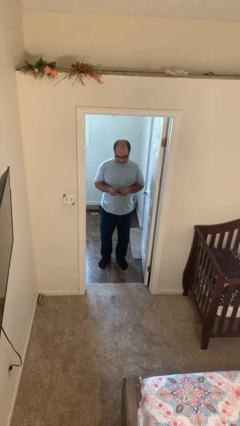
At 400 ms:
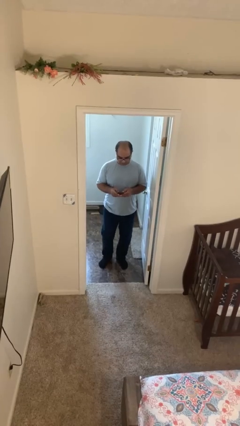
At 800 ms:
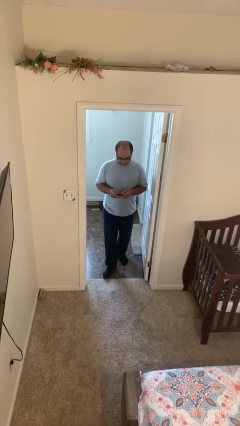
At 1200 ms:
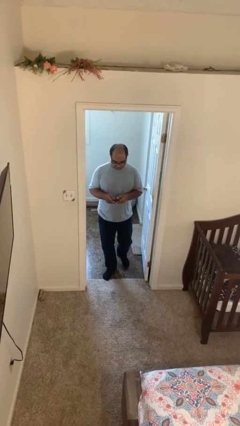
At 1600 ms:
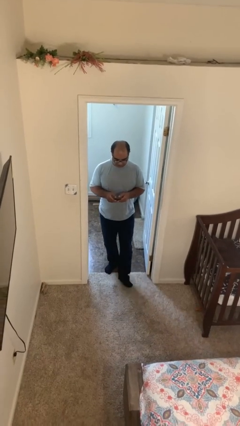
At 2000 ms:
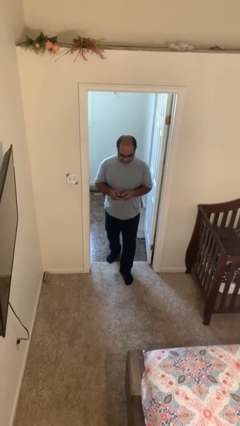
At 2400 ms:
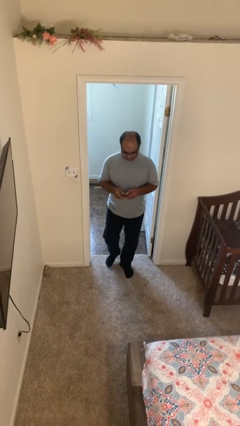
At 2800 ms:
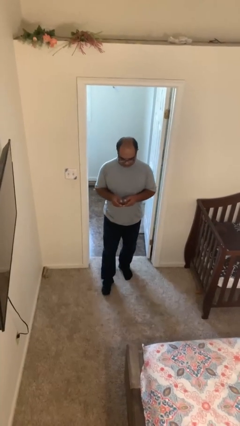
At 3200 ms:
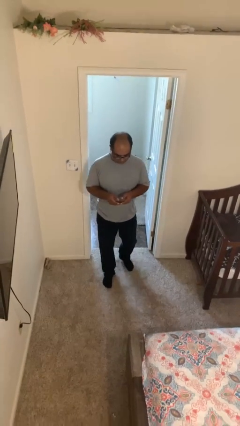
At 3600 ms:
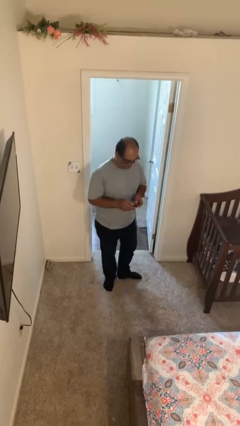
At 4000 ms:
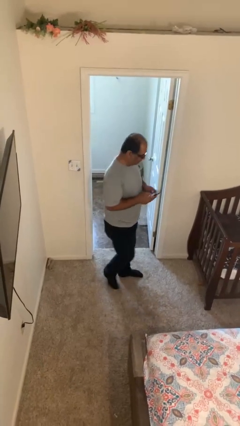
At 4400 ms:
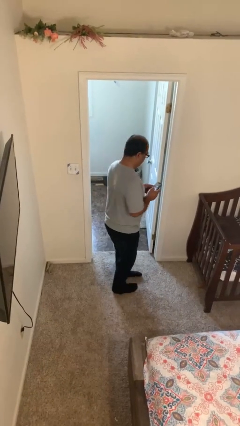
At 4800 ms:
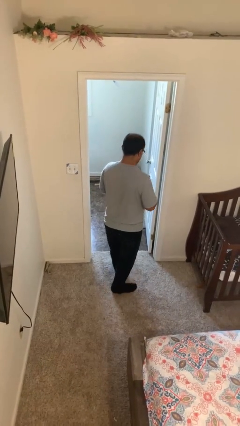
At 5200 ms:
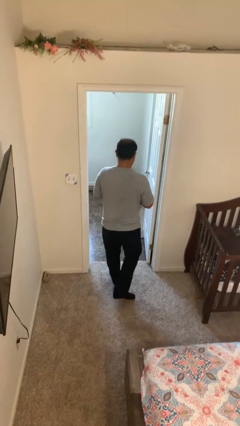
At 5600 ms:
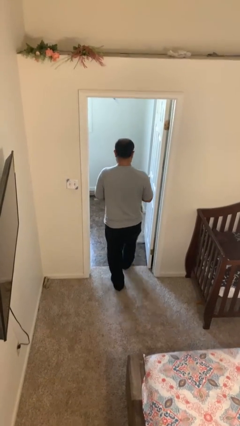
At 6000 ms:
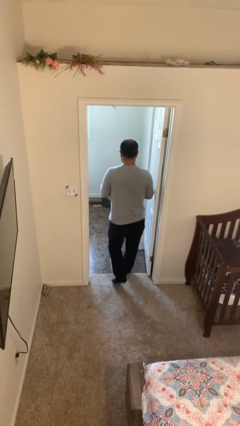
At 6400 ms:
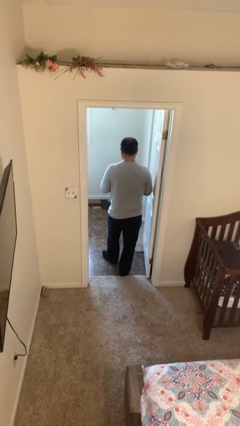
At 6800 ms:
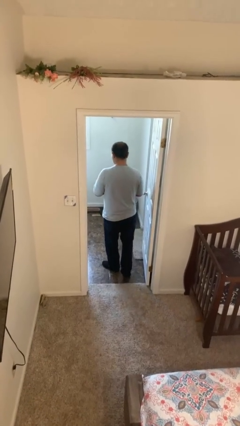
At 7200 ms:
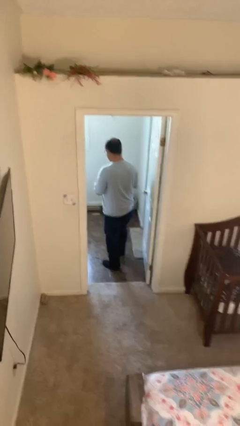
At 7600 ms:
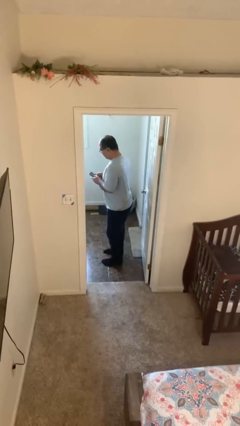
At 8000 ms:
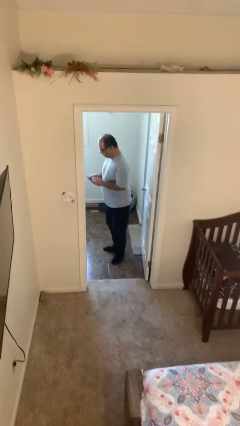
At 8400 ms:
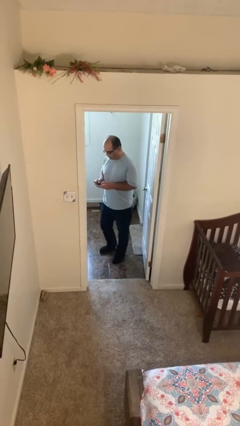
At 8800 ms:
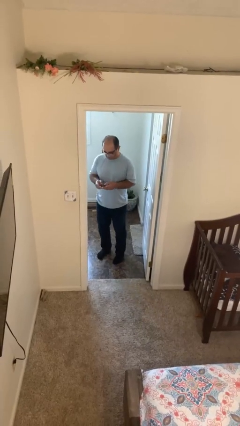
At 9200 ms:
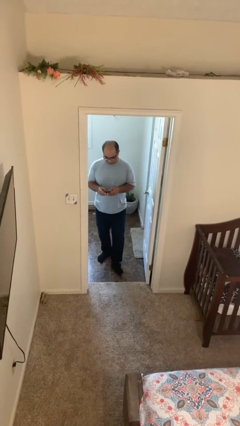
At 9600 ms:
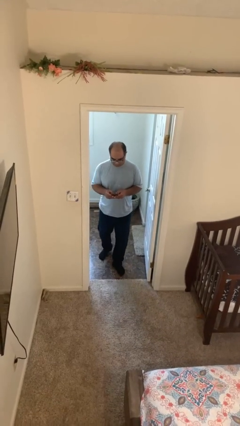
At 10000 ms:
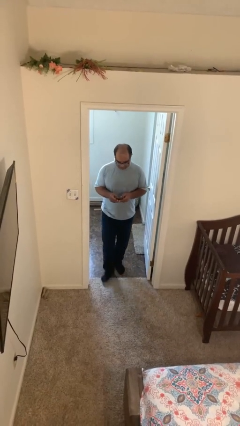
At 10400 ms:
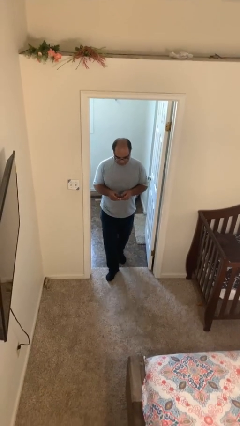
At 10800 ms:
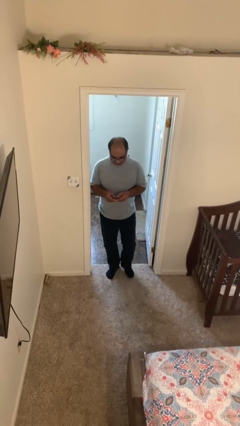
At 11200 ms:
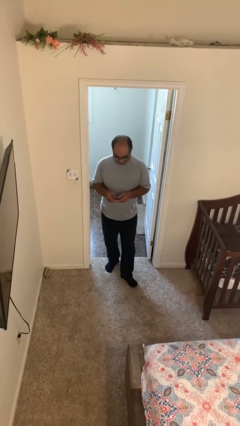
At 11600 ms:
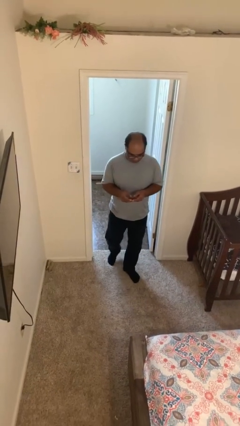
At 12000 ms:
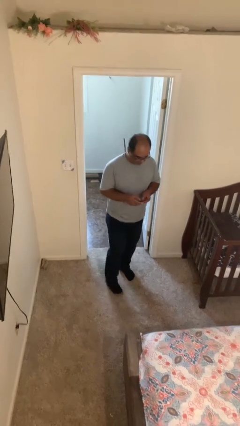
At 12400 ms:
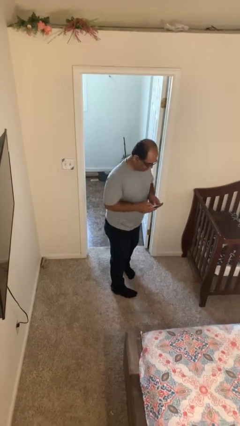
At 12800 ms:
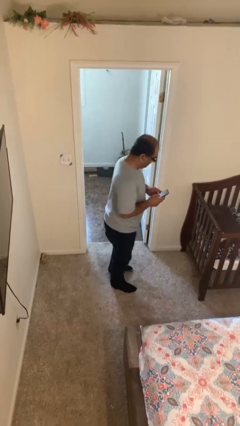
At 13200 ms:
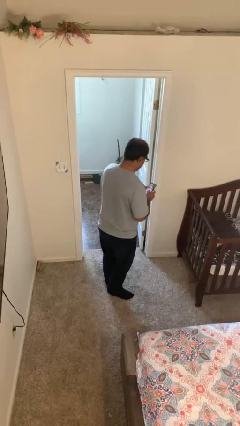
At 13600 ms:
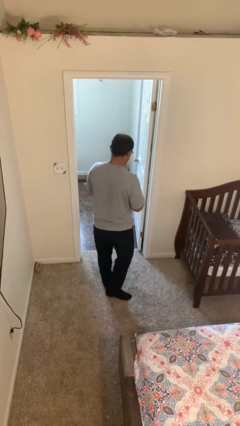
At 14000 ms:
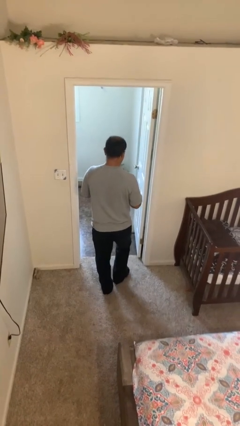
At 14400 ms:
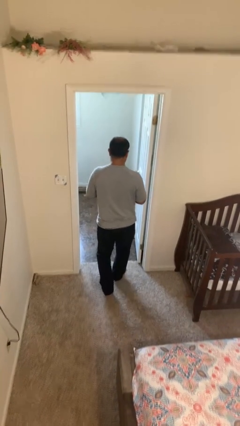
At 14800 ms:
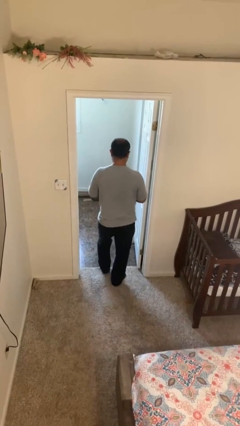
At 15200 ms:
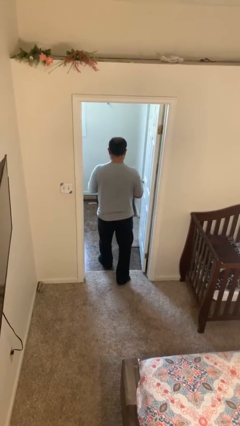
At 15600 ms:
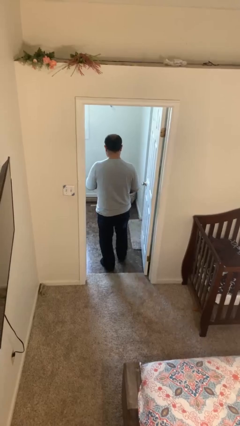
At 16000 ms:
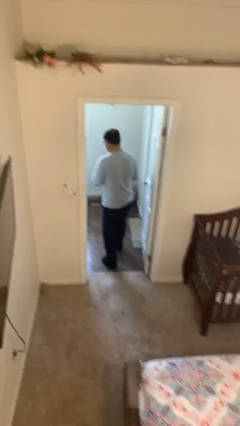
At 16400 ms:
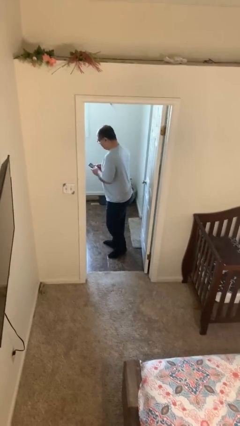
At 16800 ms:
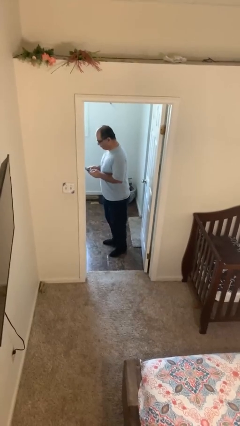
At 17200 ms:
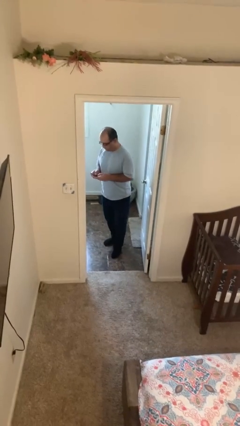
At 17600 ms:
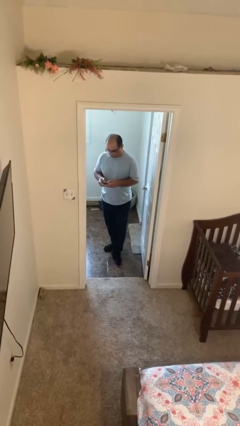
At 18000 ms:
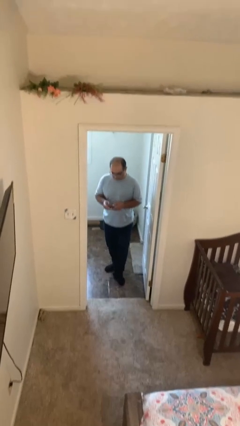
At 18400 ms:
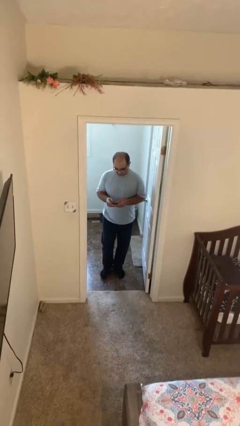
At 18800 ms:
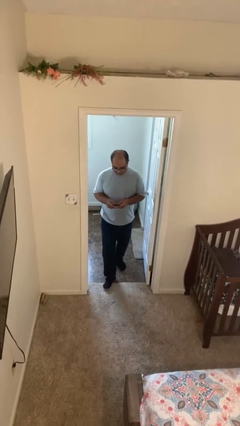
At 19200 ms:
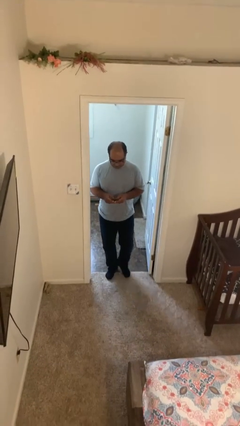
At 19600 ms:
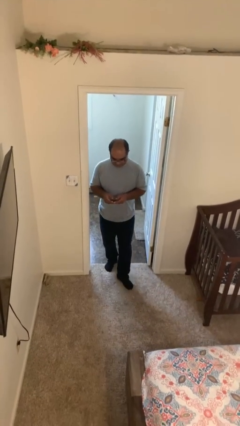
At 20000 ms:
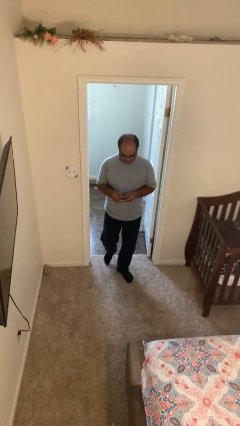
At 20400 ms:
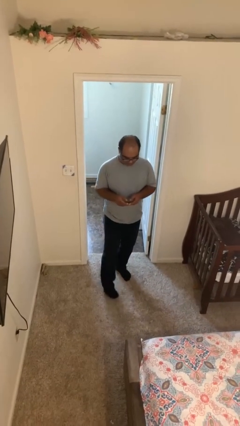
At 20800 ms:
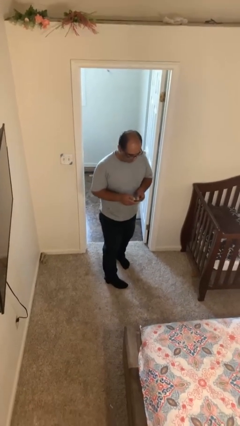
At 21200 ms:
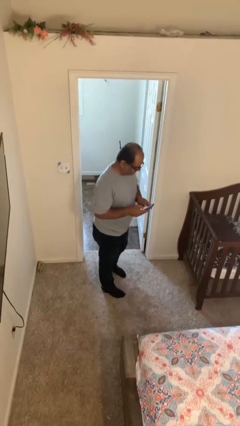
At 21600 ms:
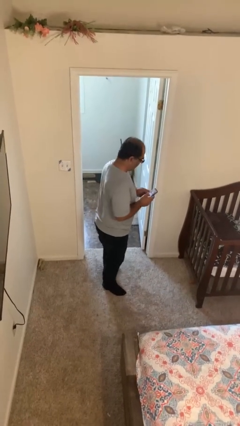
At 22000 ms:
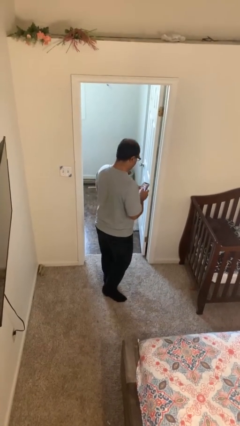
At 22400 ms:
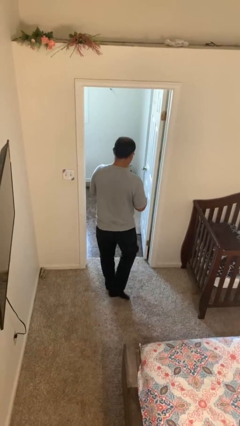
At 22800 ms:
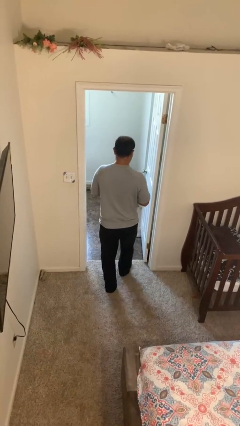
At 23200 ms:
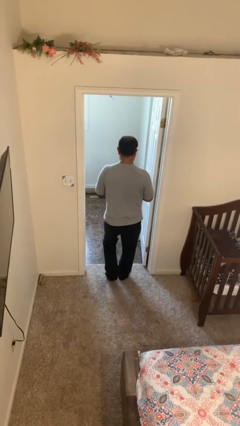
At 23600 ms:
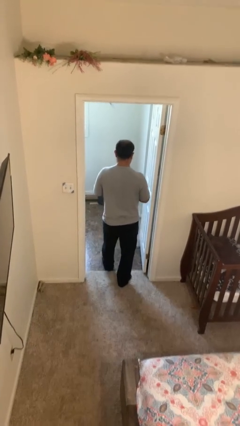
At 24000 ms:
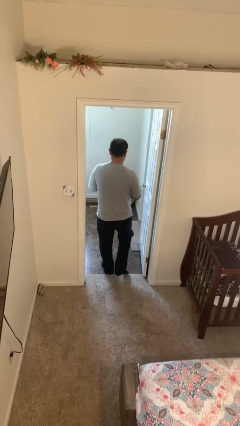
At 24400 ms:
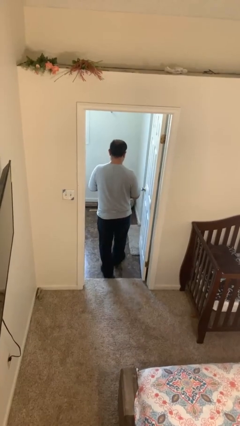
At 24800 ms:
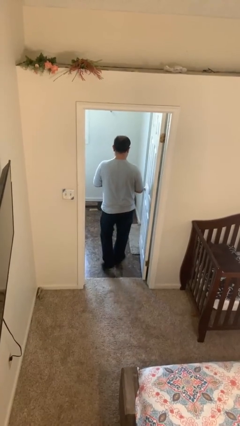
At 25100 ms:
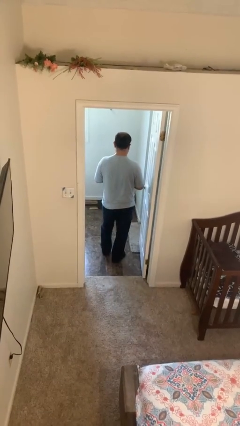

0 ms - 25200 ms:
person texts on phone

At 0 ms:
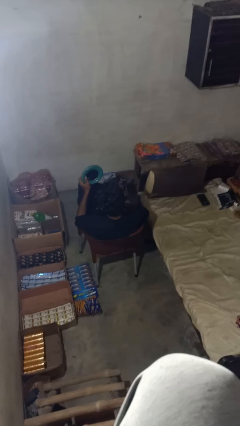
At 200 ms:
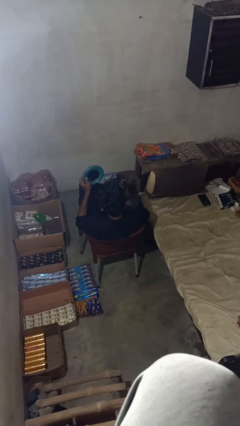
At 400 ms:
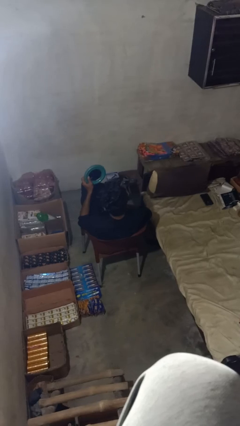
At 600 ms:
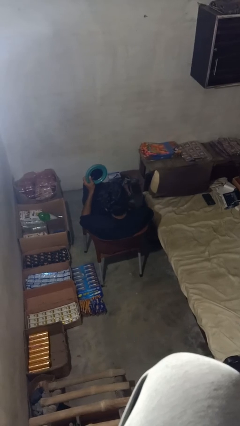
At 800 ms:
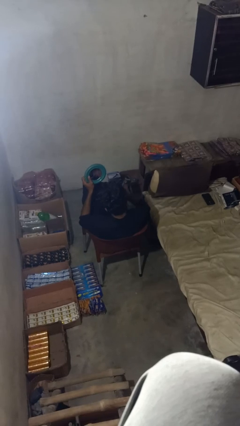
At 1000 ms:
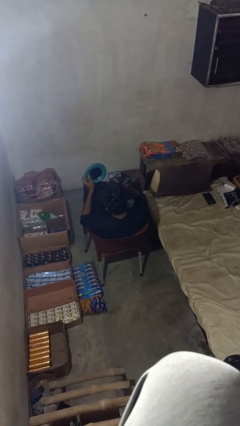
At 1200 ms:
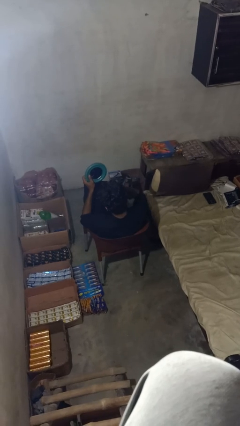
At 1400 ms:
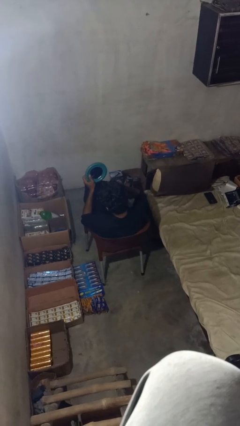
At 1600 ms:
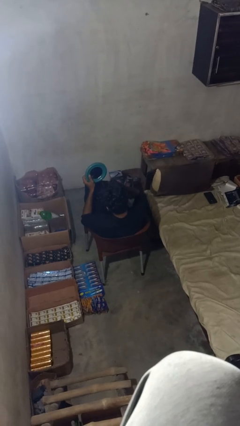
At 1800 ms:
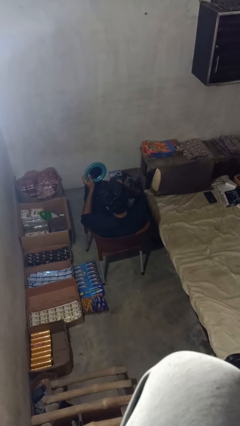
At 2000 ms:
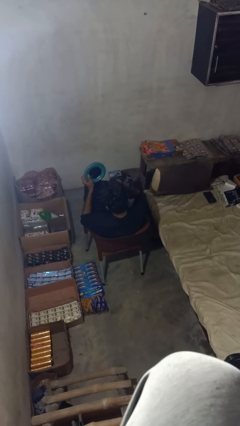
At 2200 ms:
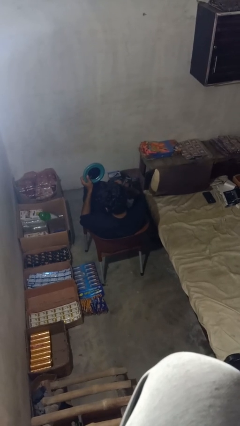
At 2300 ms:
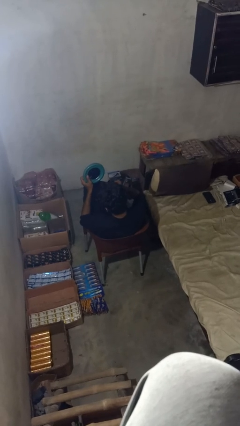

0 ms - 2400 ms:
person applies eye makeup

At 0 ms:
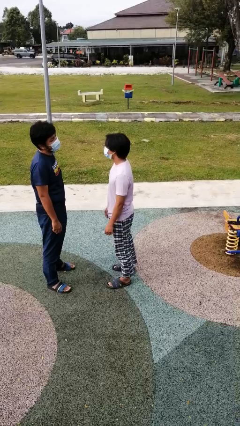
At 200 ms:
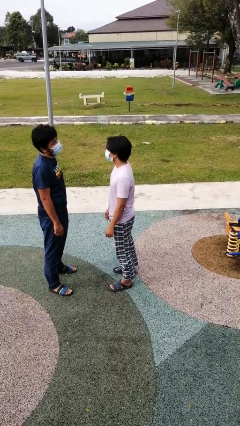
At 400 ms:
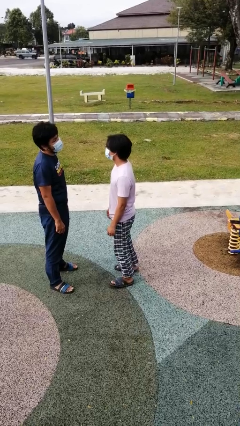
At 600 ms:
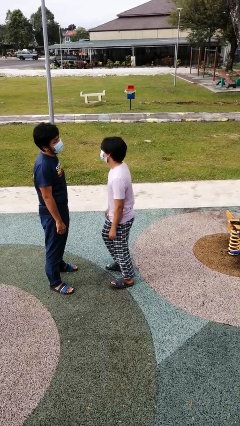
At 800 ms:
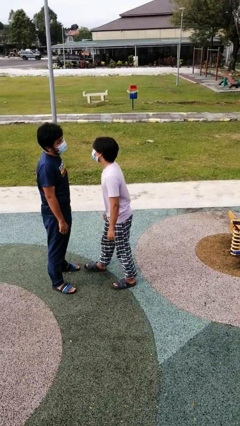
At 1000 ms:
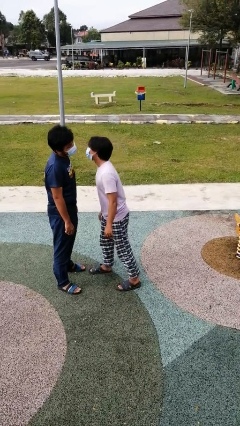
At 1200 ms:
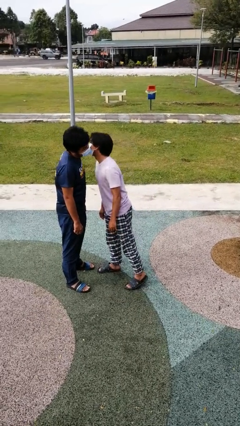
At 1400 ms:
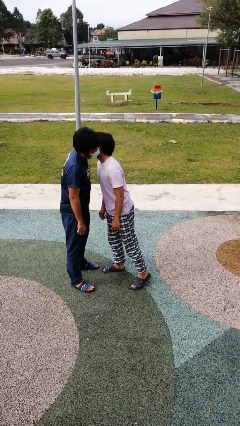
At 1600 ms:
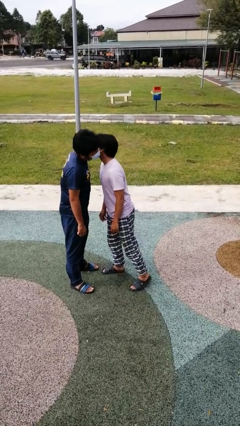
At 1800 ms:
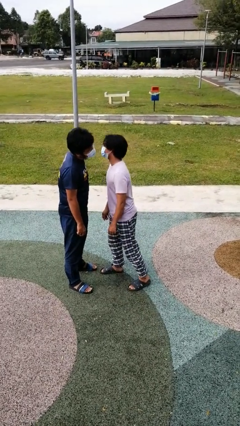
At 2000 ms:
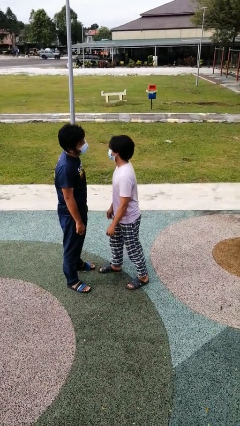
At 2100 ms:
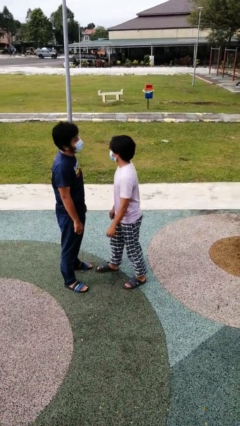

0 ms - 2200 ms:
person kisses cheek of person

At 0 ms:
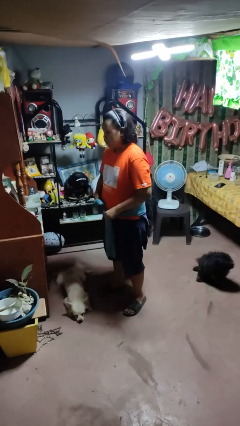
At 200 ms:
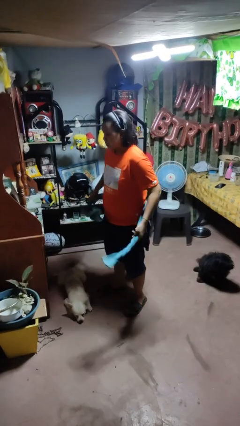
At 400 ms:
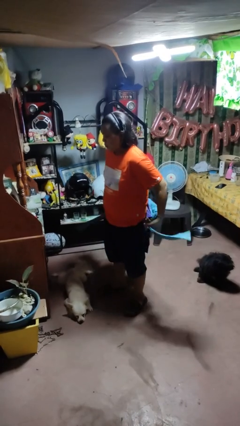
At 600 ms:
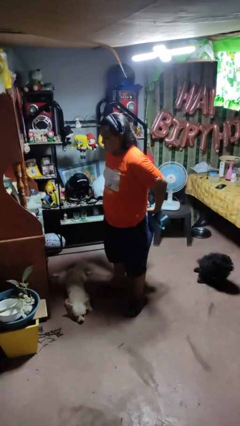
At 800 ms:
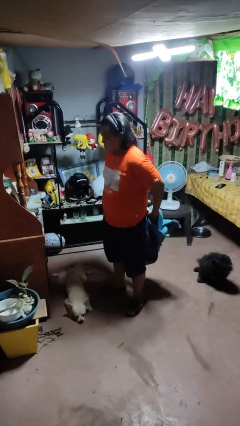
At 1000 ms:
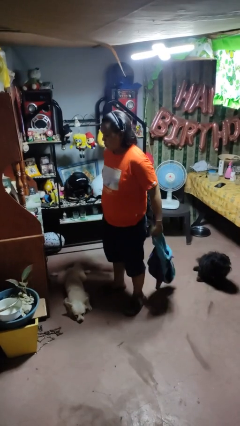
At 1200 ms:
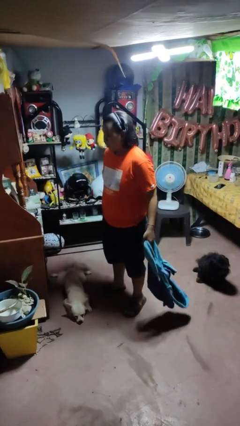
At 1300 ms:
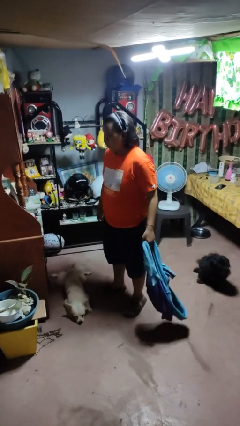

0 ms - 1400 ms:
person unties jacket around waist
